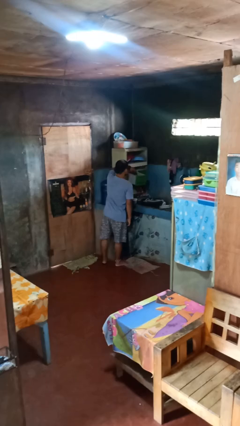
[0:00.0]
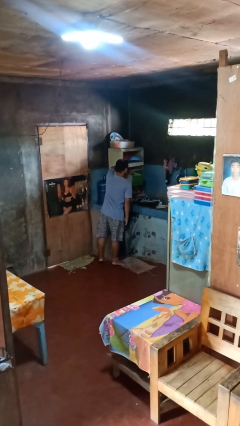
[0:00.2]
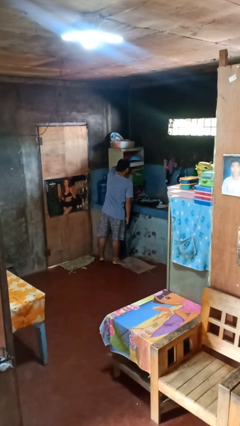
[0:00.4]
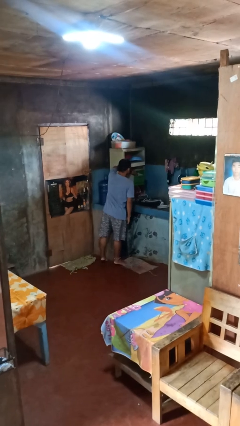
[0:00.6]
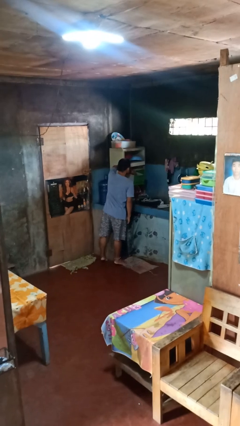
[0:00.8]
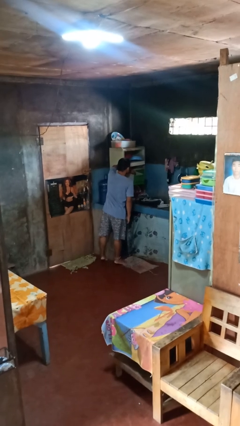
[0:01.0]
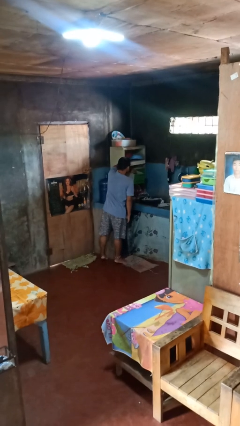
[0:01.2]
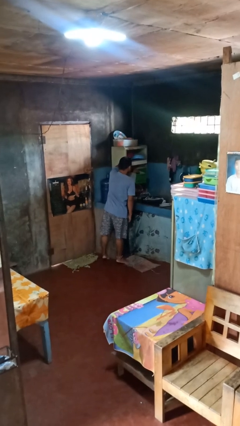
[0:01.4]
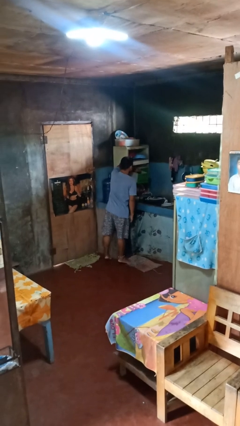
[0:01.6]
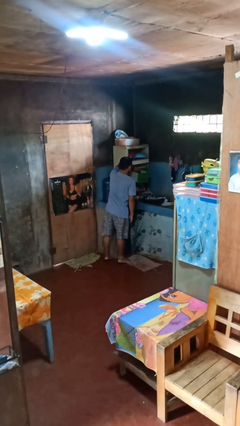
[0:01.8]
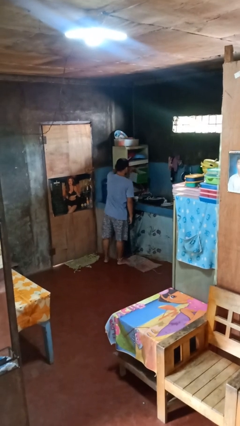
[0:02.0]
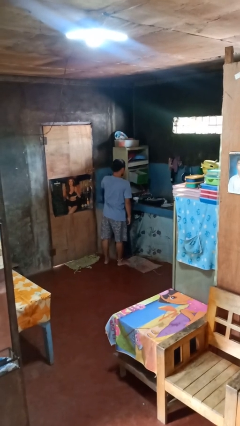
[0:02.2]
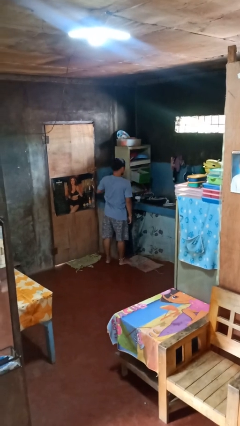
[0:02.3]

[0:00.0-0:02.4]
person searches in kitchen drawer

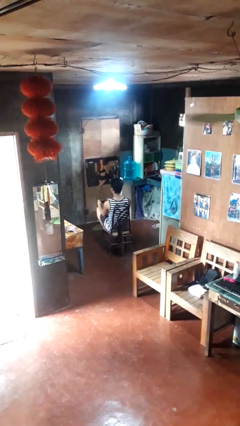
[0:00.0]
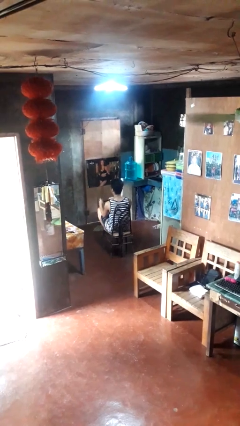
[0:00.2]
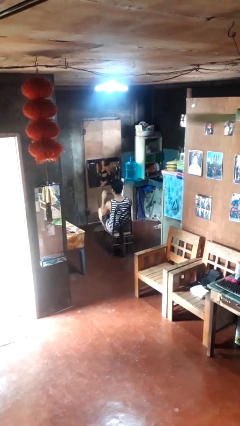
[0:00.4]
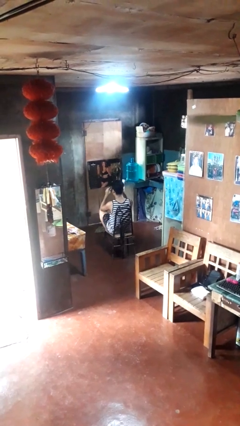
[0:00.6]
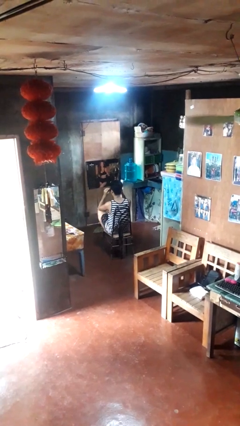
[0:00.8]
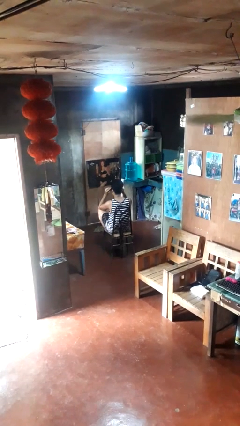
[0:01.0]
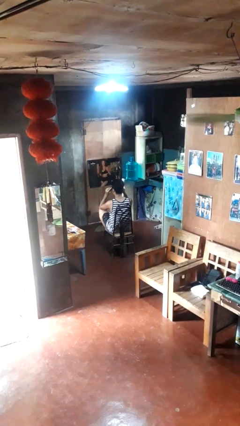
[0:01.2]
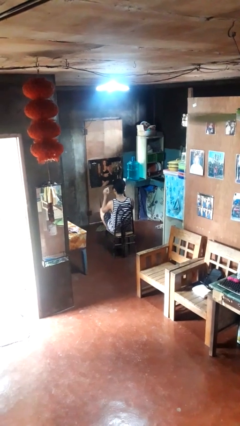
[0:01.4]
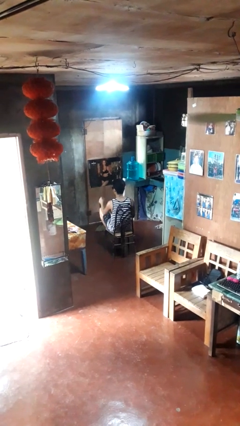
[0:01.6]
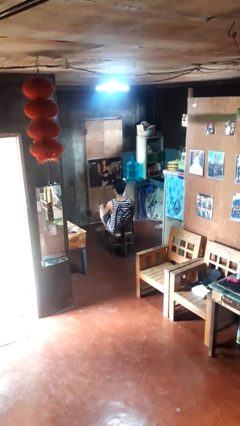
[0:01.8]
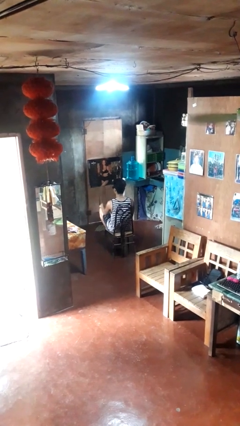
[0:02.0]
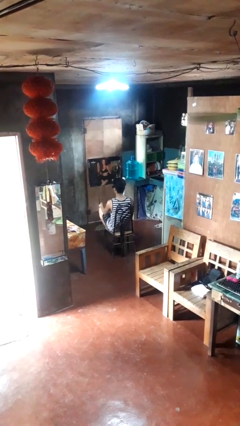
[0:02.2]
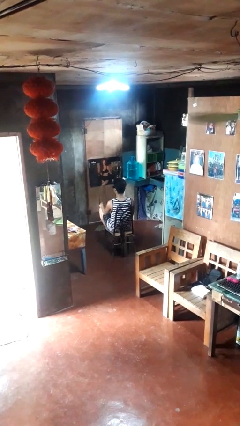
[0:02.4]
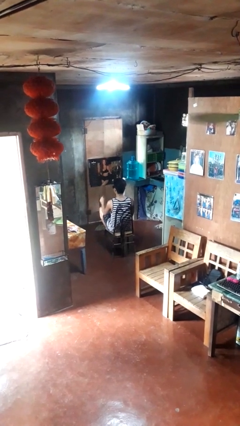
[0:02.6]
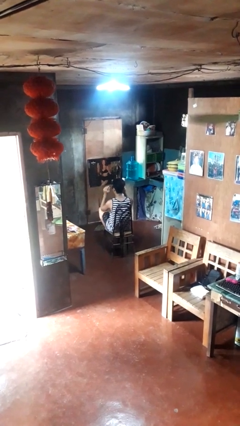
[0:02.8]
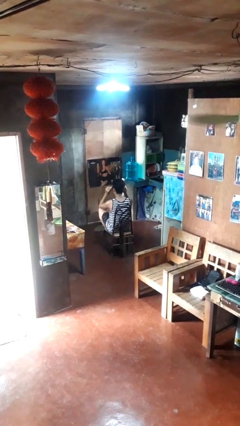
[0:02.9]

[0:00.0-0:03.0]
person puts on sunglasses

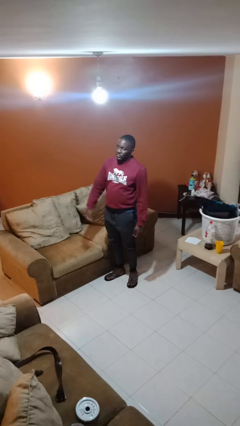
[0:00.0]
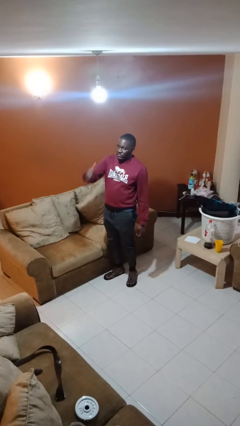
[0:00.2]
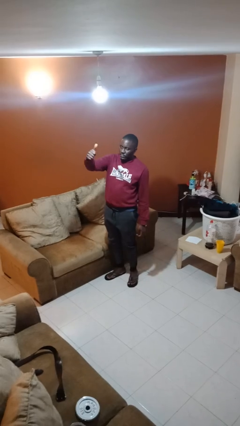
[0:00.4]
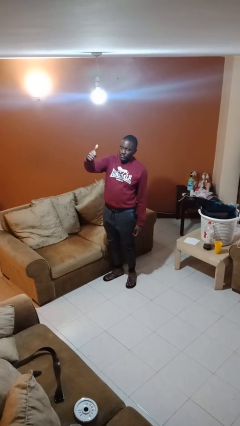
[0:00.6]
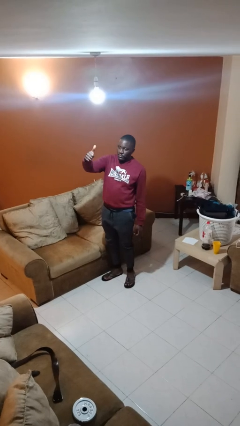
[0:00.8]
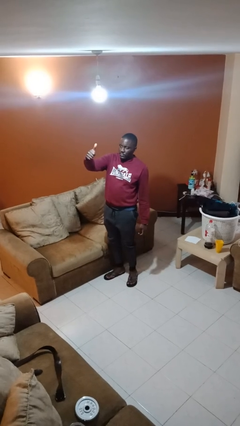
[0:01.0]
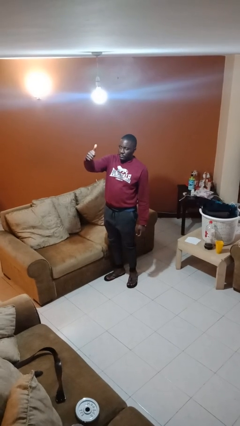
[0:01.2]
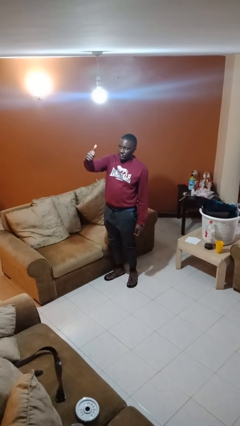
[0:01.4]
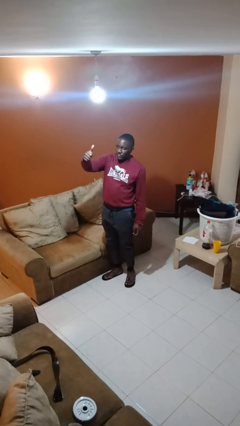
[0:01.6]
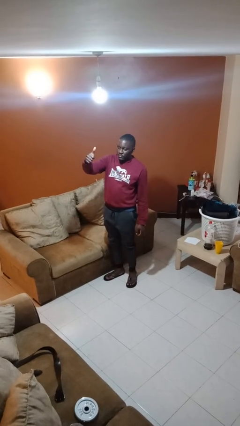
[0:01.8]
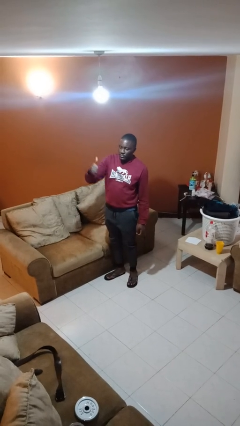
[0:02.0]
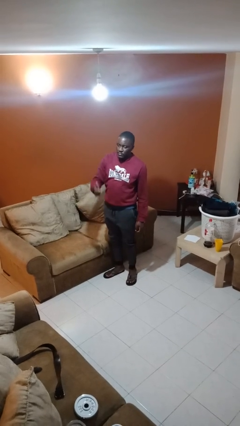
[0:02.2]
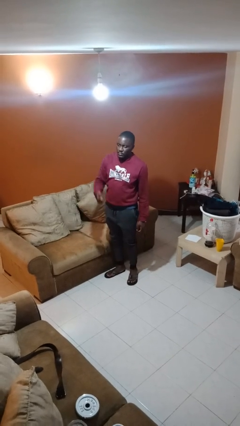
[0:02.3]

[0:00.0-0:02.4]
person gestures thumbs up

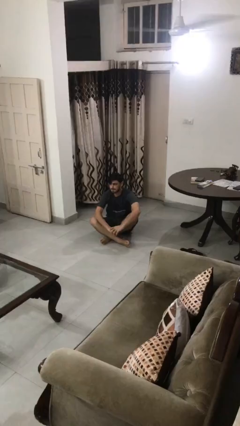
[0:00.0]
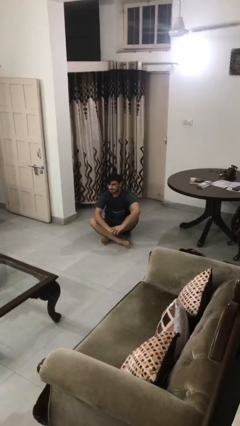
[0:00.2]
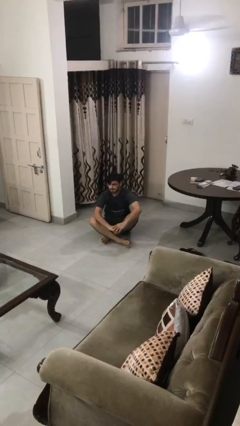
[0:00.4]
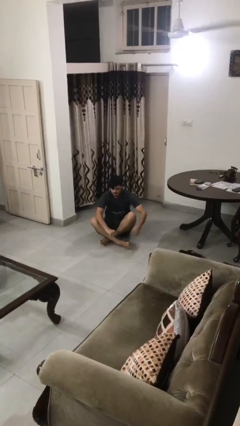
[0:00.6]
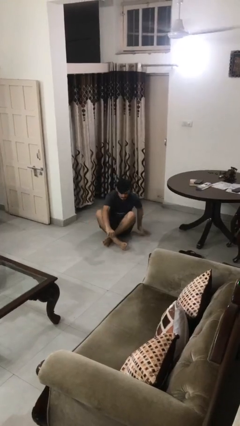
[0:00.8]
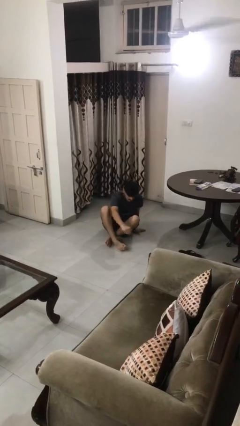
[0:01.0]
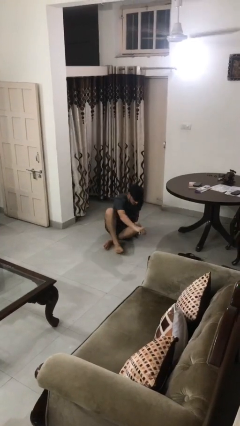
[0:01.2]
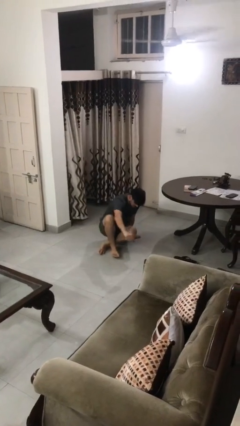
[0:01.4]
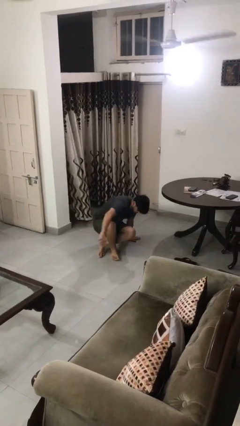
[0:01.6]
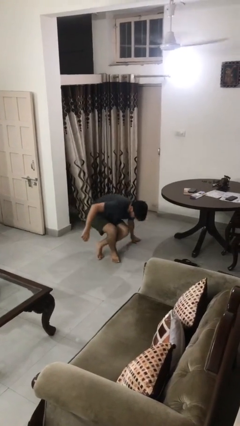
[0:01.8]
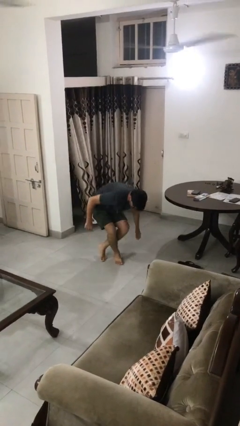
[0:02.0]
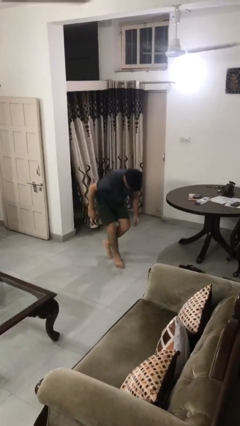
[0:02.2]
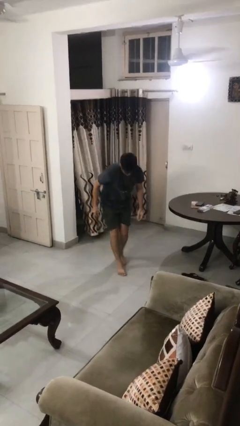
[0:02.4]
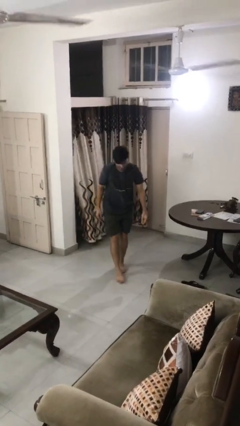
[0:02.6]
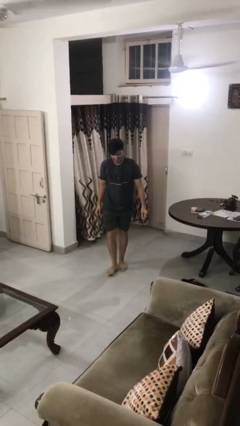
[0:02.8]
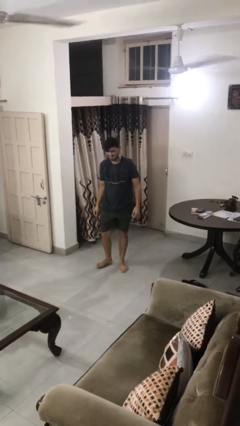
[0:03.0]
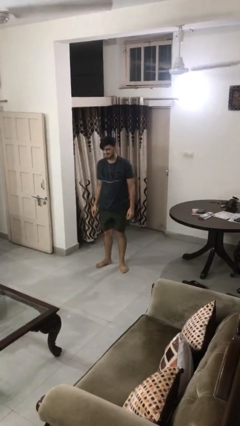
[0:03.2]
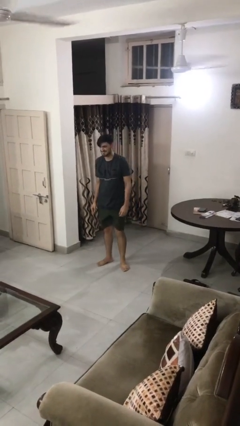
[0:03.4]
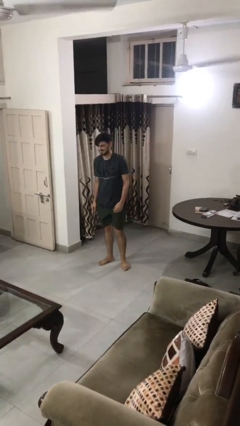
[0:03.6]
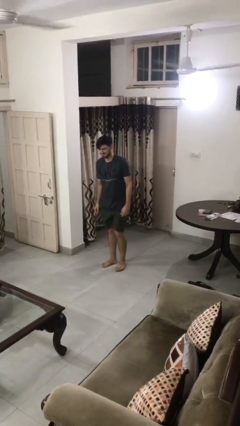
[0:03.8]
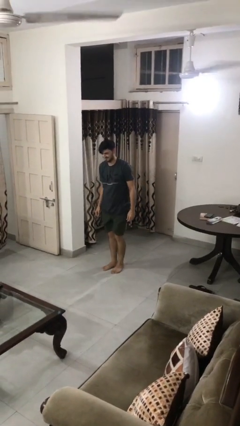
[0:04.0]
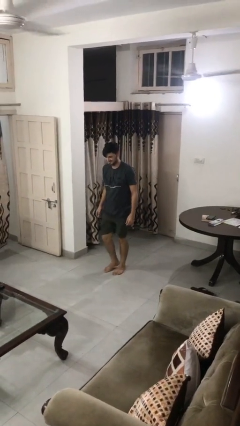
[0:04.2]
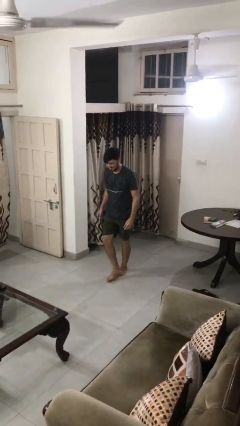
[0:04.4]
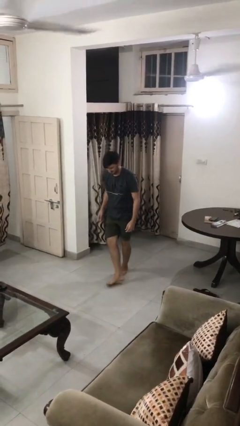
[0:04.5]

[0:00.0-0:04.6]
person stands up from floor

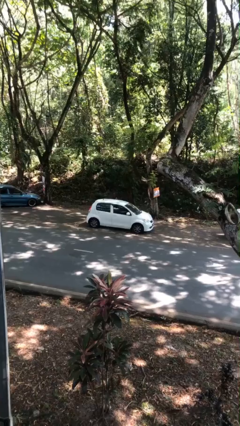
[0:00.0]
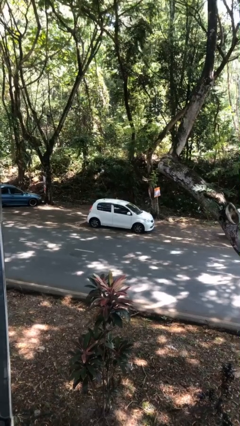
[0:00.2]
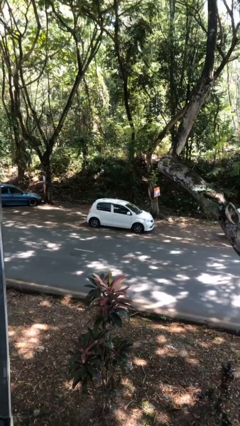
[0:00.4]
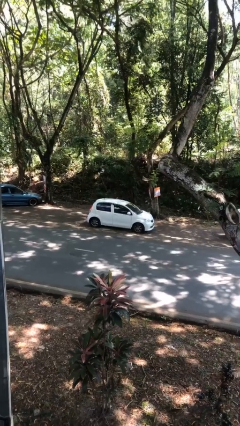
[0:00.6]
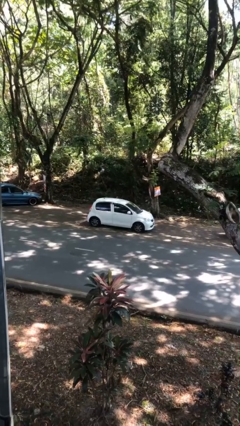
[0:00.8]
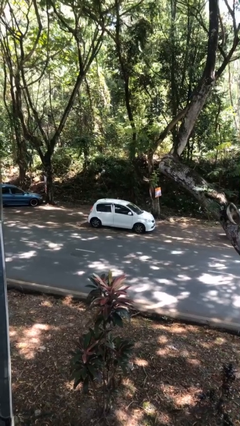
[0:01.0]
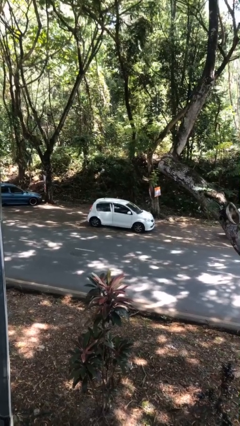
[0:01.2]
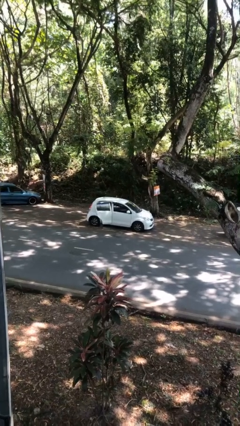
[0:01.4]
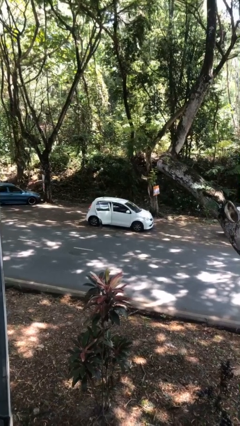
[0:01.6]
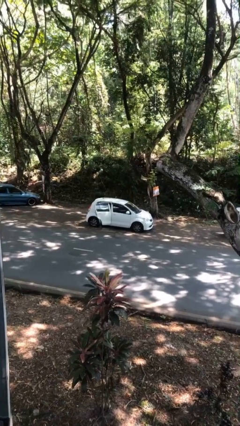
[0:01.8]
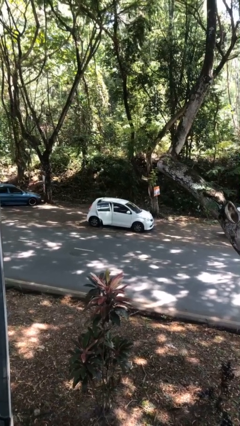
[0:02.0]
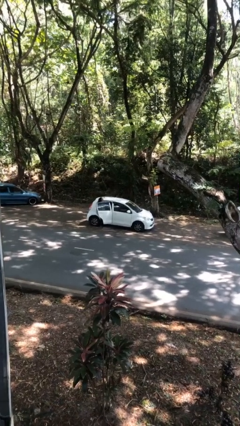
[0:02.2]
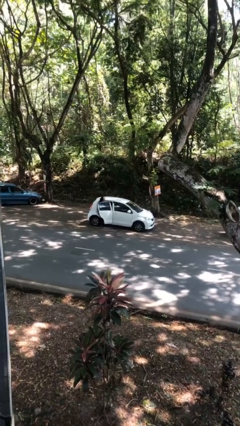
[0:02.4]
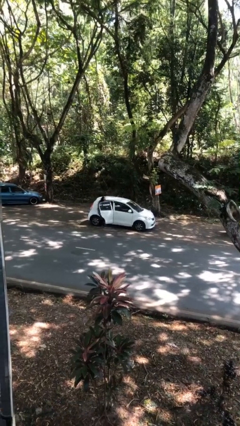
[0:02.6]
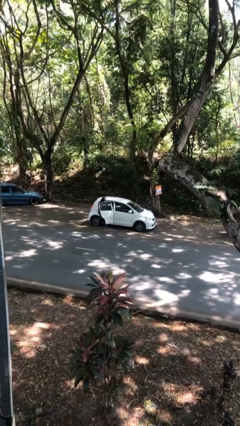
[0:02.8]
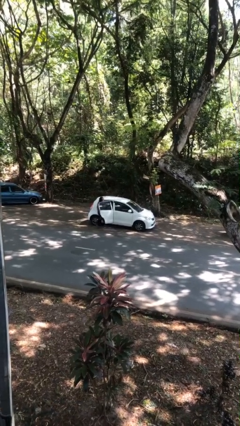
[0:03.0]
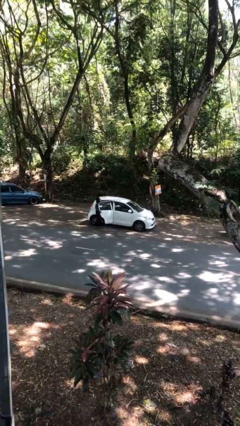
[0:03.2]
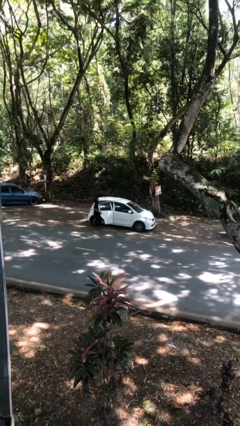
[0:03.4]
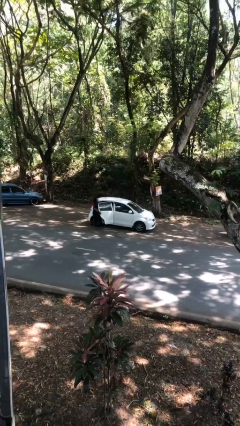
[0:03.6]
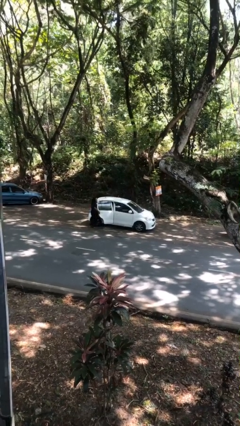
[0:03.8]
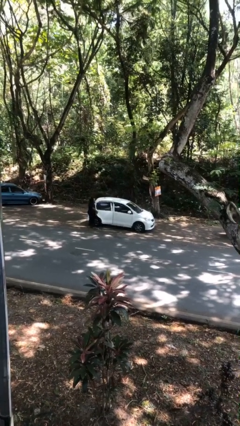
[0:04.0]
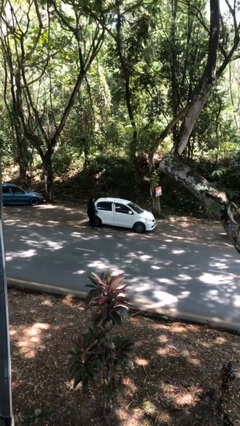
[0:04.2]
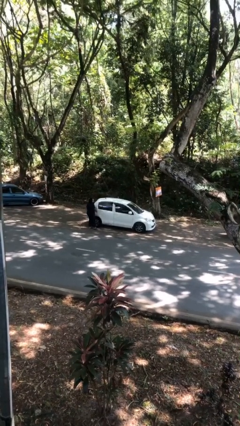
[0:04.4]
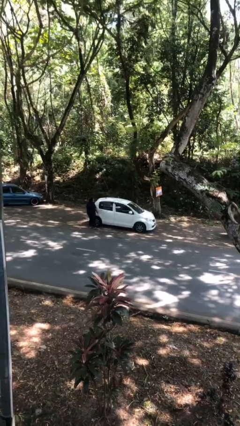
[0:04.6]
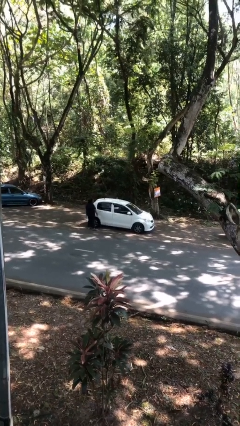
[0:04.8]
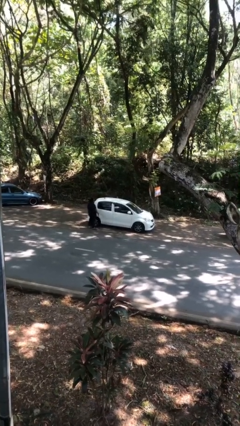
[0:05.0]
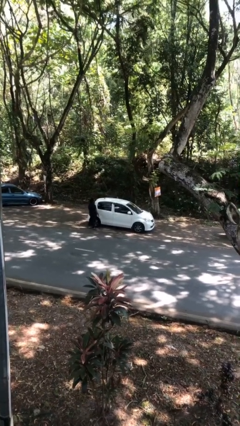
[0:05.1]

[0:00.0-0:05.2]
car drops off person

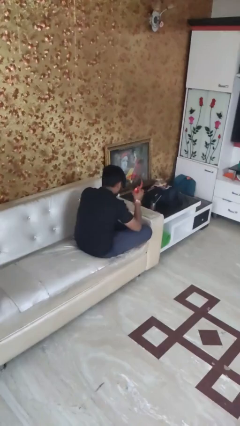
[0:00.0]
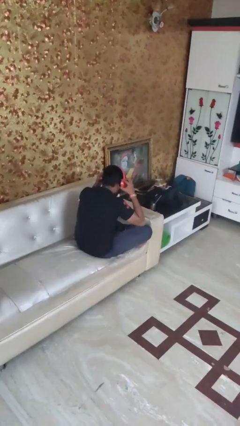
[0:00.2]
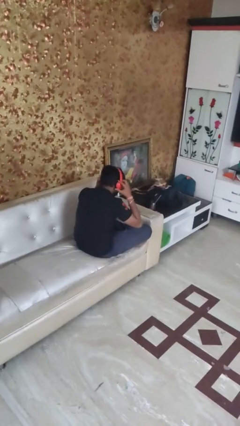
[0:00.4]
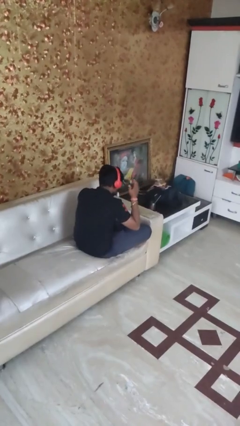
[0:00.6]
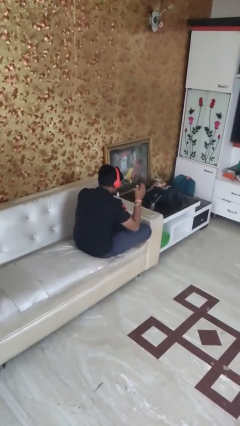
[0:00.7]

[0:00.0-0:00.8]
person puts on headphones
